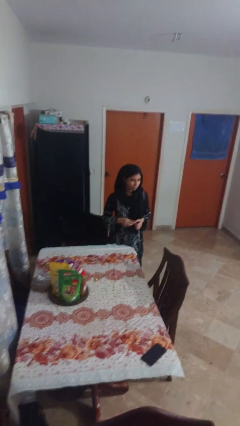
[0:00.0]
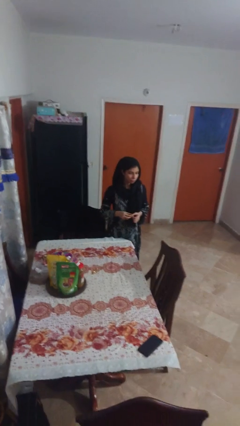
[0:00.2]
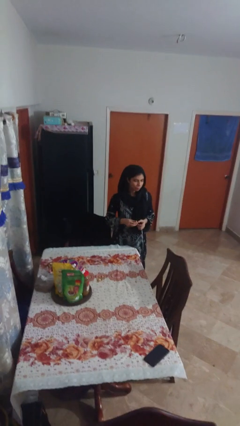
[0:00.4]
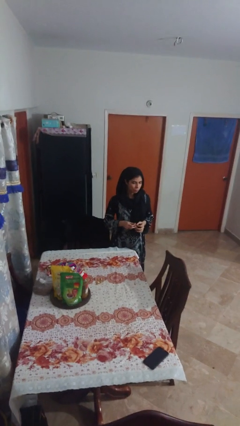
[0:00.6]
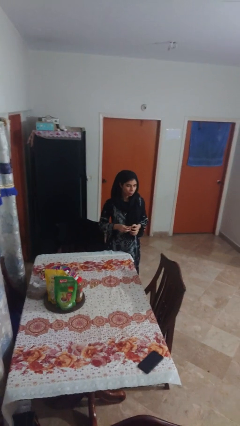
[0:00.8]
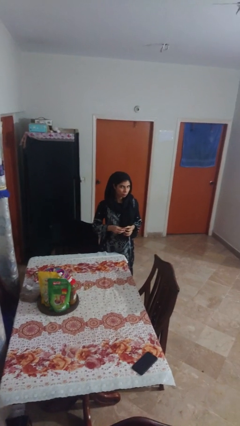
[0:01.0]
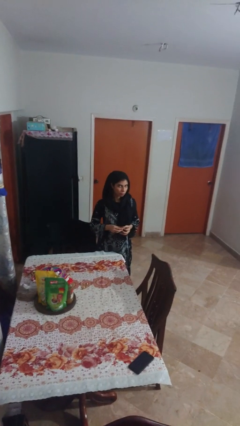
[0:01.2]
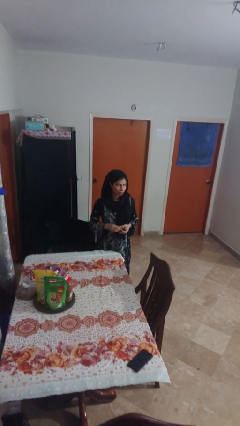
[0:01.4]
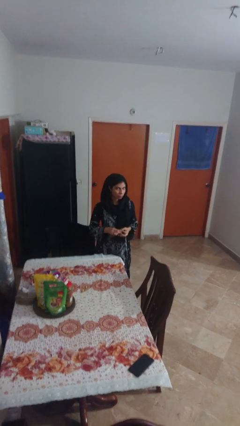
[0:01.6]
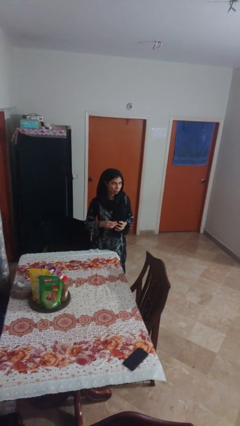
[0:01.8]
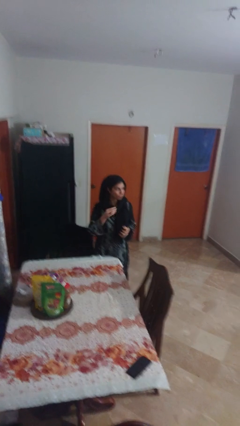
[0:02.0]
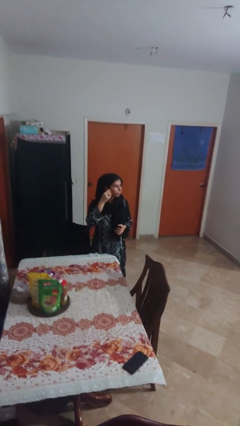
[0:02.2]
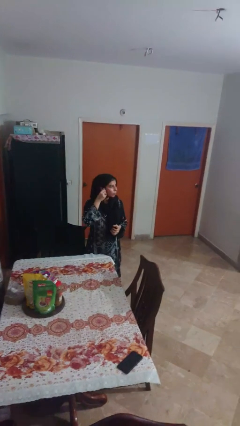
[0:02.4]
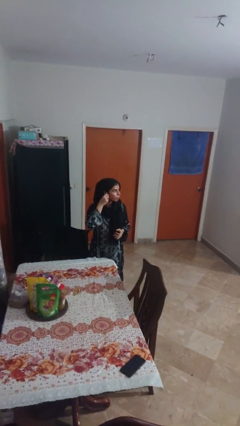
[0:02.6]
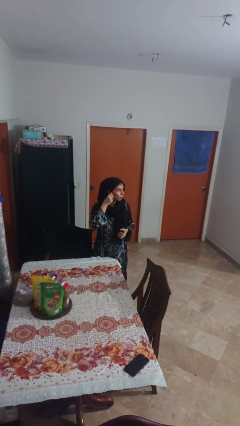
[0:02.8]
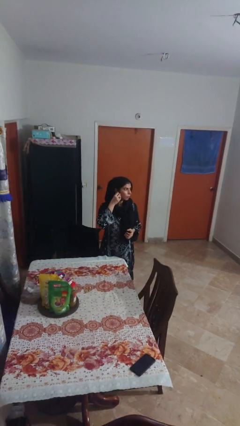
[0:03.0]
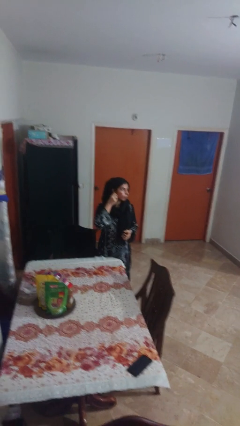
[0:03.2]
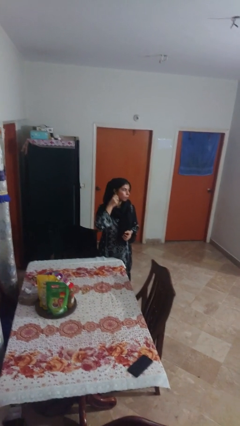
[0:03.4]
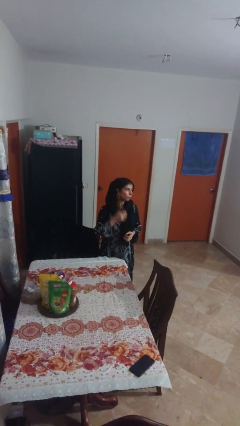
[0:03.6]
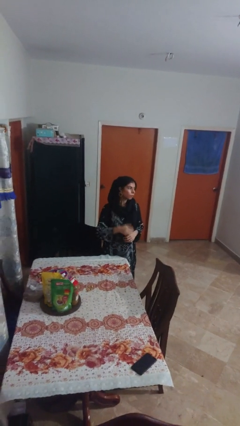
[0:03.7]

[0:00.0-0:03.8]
person puts on earrings

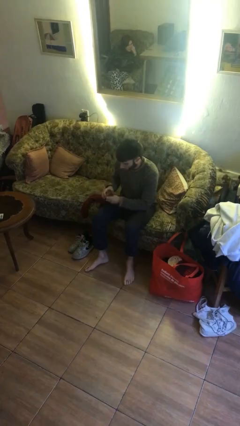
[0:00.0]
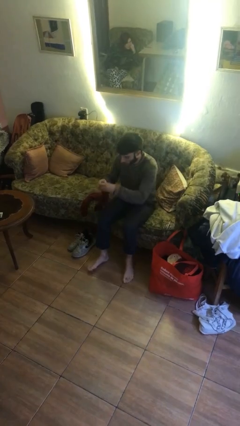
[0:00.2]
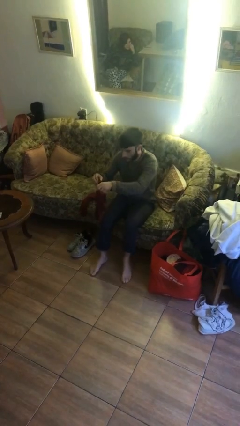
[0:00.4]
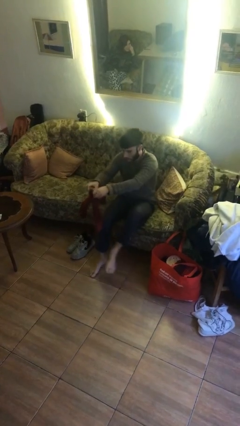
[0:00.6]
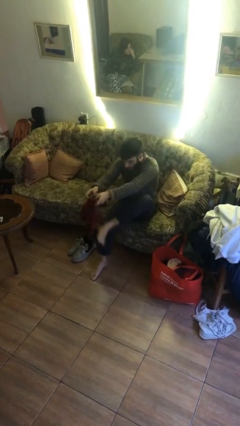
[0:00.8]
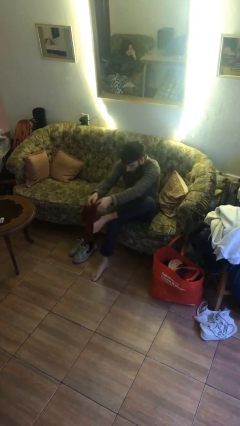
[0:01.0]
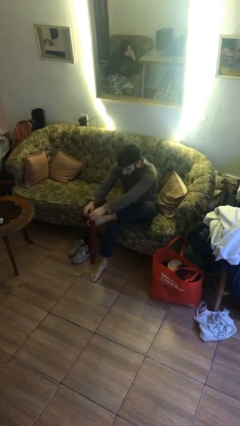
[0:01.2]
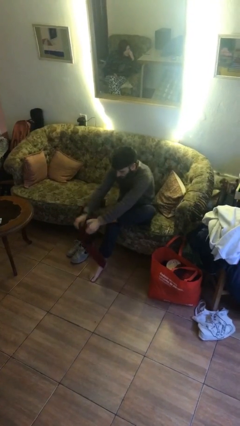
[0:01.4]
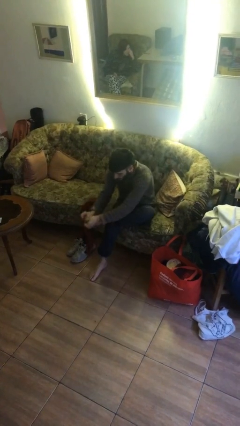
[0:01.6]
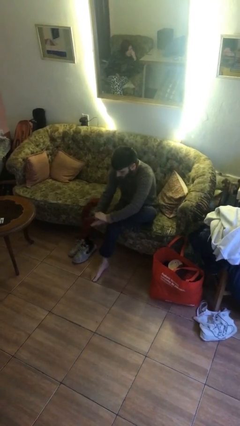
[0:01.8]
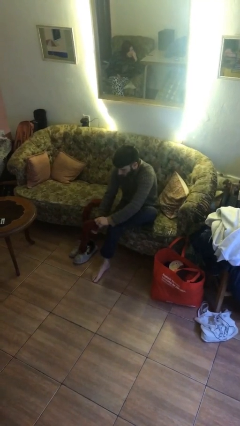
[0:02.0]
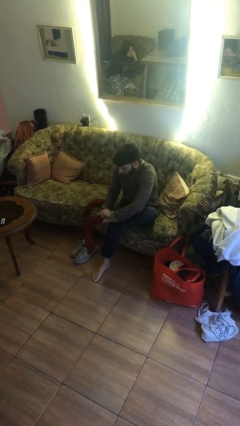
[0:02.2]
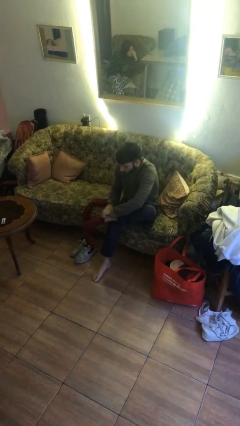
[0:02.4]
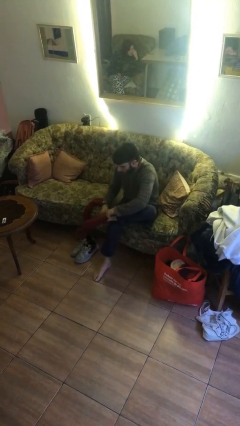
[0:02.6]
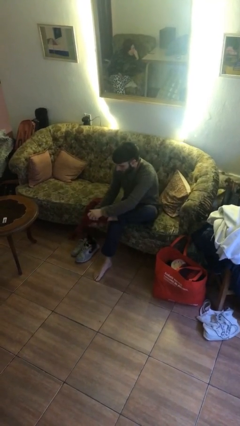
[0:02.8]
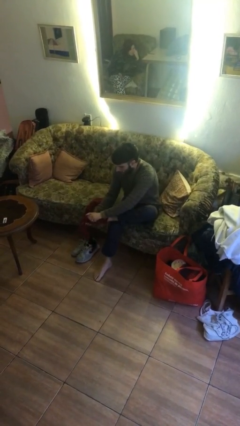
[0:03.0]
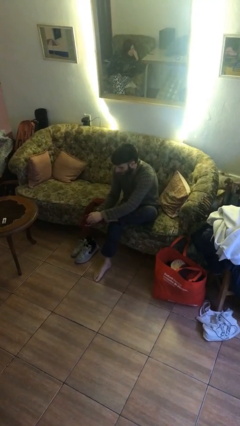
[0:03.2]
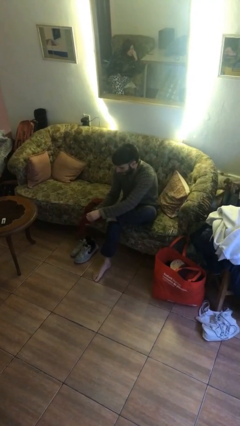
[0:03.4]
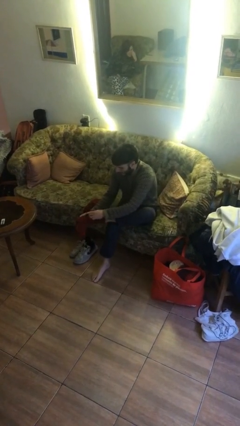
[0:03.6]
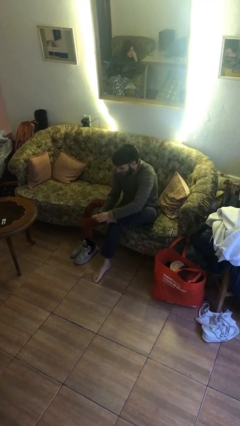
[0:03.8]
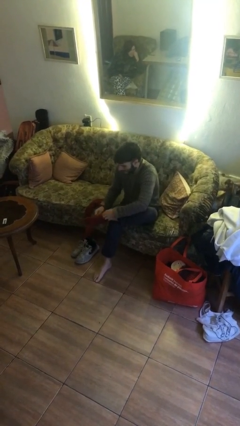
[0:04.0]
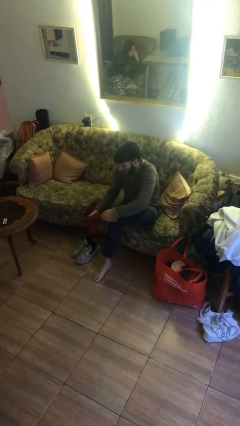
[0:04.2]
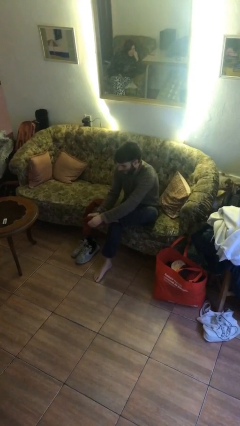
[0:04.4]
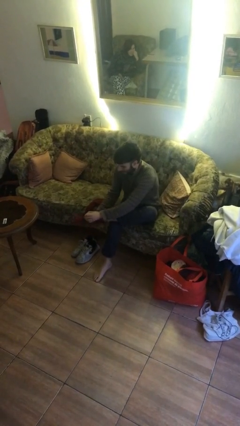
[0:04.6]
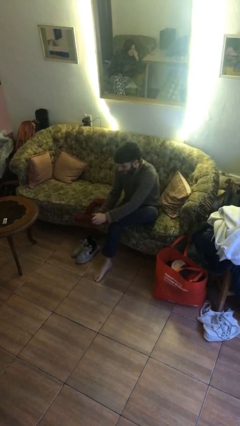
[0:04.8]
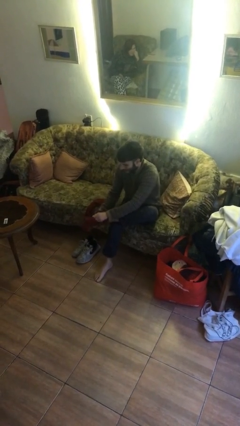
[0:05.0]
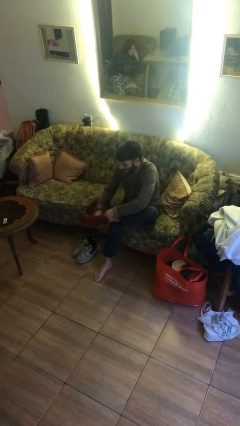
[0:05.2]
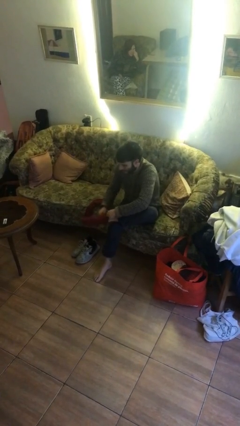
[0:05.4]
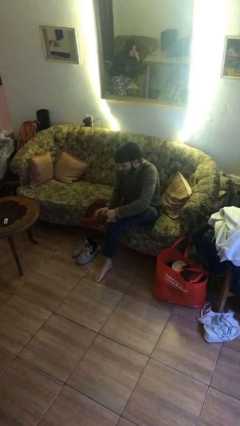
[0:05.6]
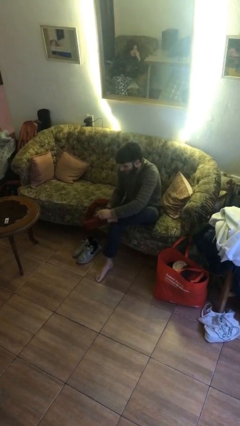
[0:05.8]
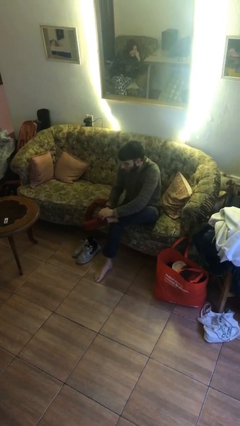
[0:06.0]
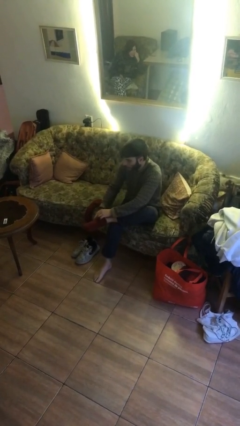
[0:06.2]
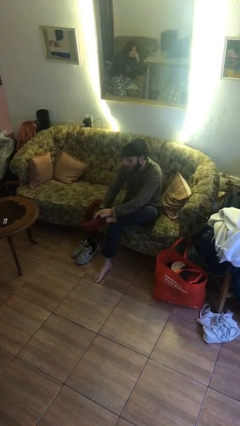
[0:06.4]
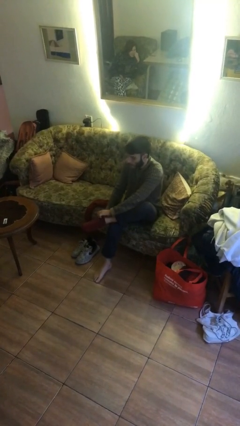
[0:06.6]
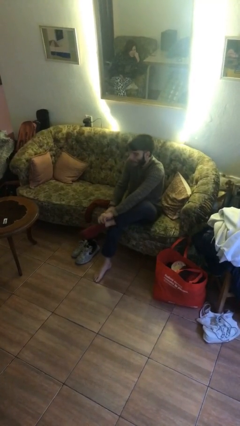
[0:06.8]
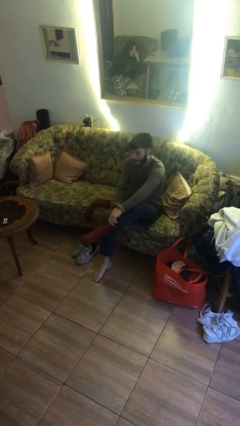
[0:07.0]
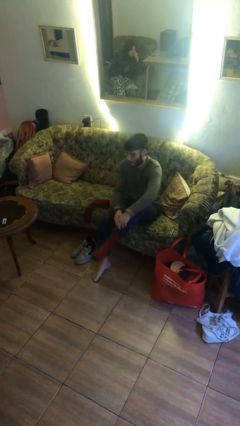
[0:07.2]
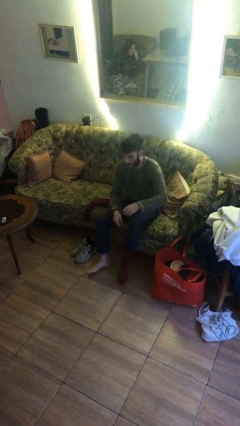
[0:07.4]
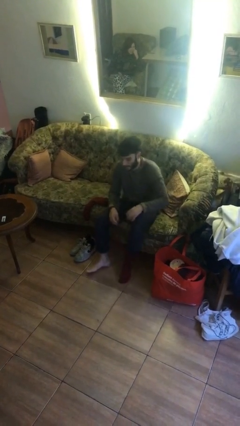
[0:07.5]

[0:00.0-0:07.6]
person puts on socks

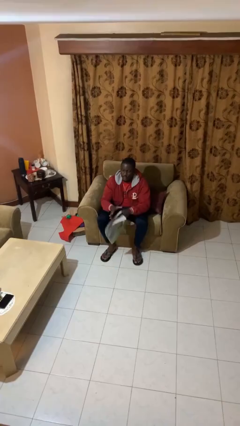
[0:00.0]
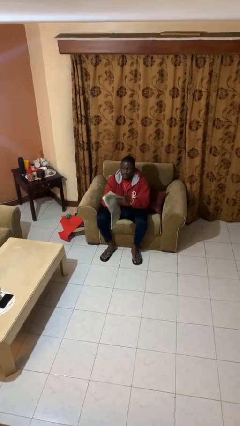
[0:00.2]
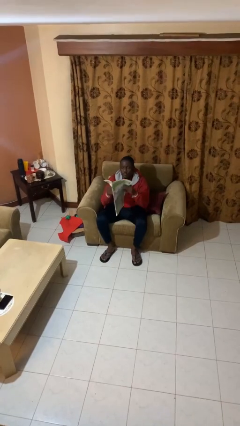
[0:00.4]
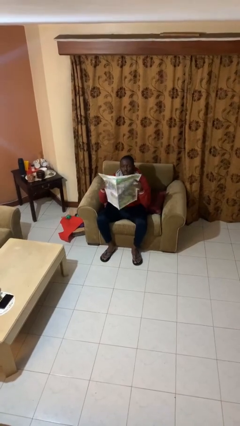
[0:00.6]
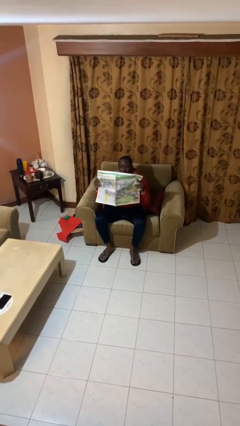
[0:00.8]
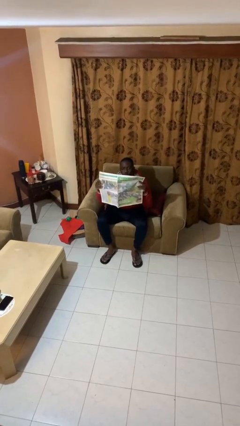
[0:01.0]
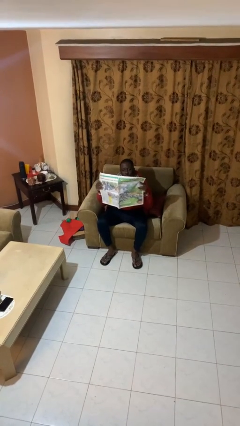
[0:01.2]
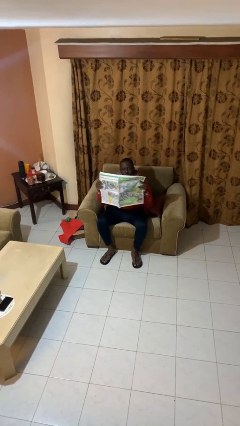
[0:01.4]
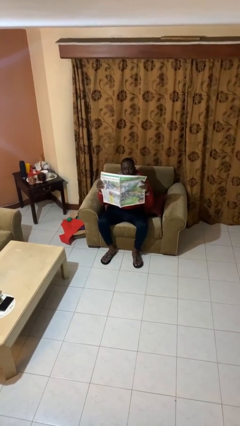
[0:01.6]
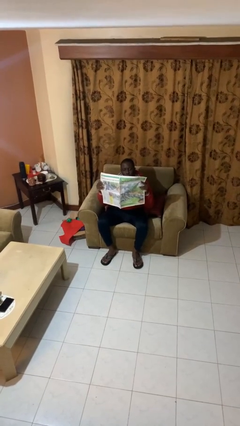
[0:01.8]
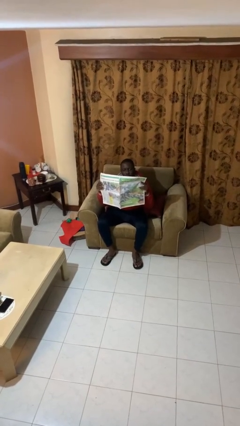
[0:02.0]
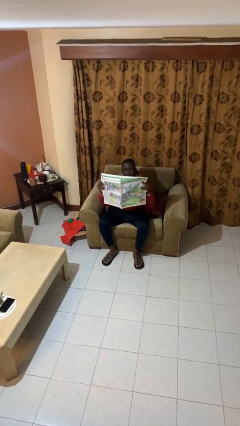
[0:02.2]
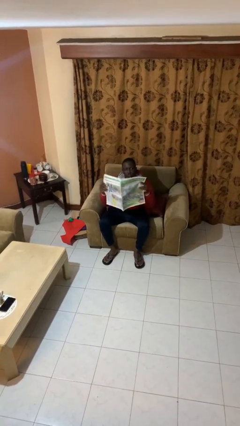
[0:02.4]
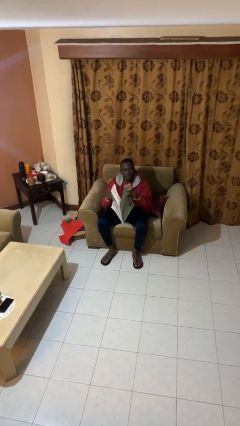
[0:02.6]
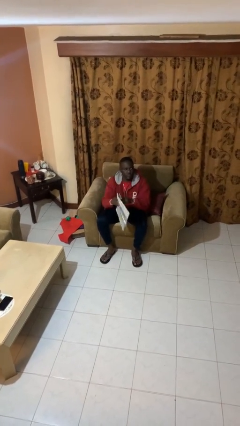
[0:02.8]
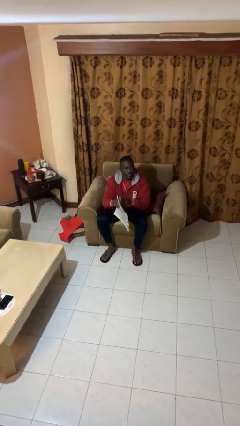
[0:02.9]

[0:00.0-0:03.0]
person reads newspaper

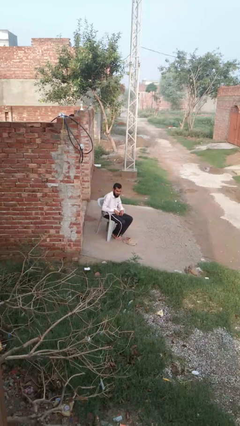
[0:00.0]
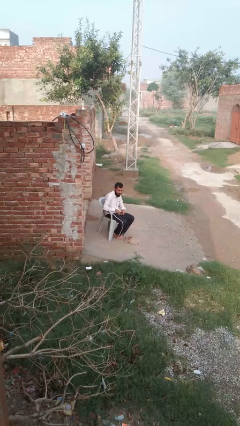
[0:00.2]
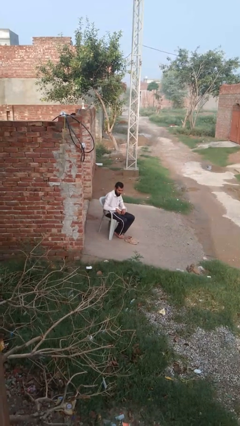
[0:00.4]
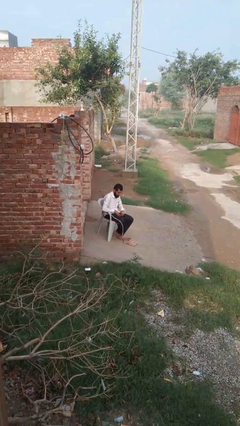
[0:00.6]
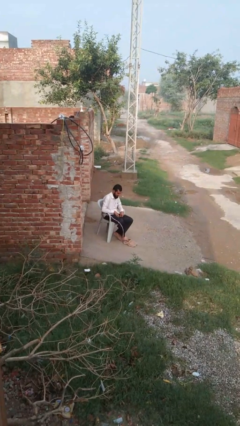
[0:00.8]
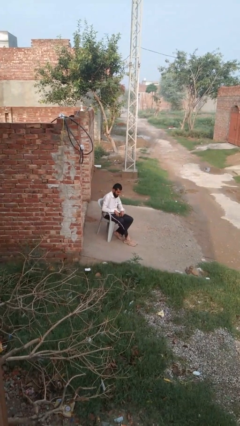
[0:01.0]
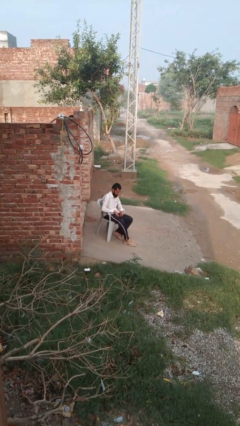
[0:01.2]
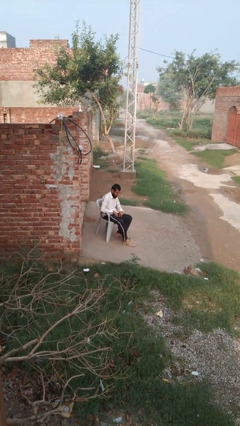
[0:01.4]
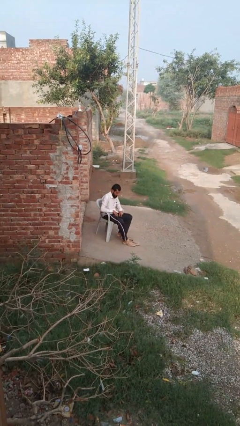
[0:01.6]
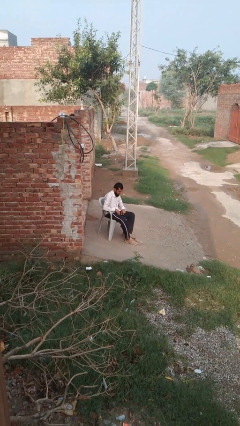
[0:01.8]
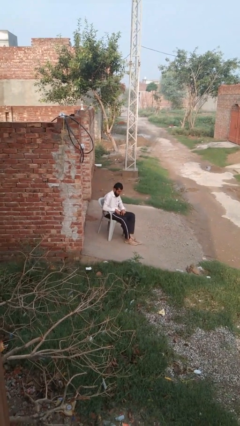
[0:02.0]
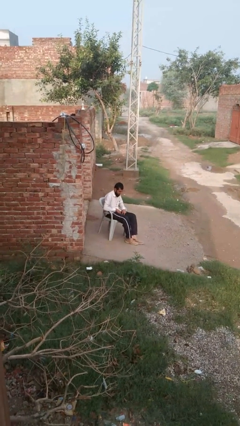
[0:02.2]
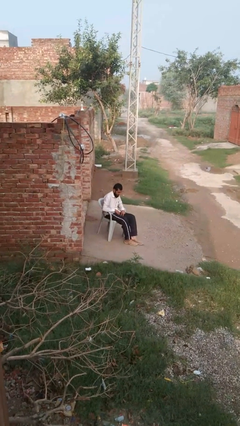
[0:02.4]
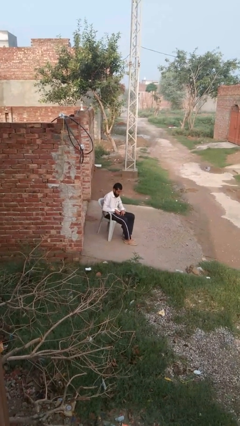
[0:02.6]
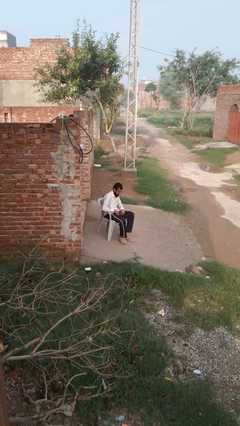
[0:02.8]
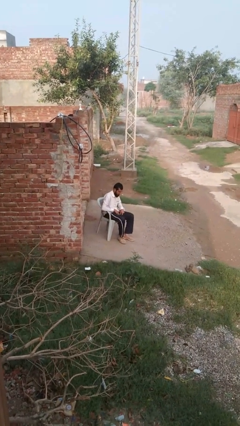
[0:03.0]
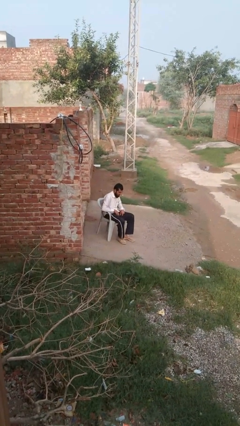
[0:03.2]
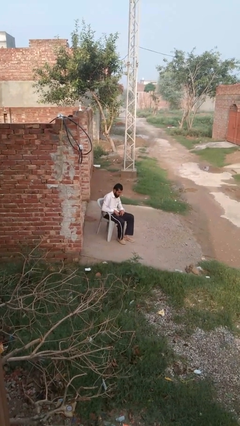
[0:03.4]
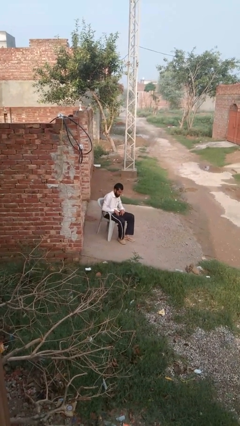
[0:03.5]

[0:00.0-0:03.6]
person puts on shoes
